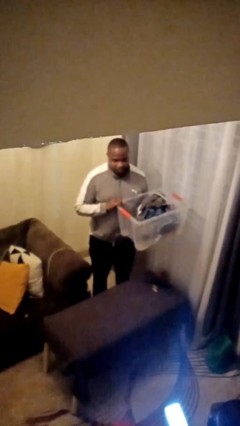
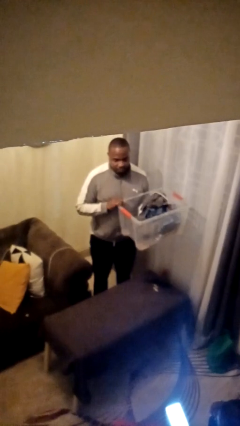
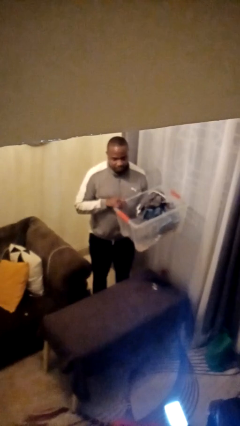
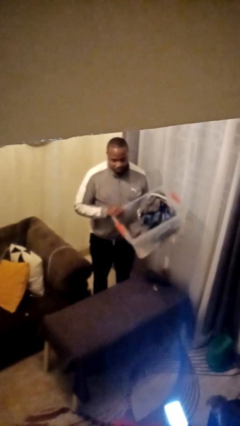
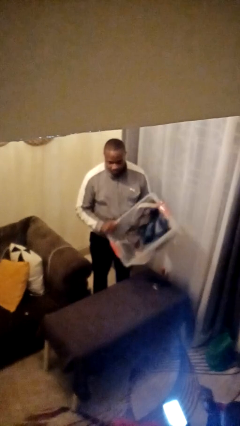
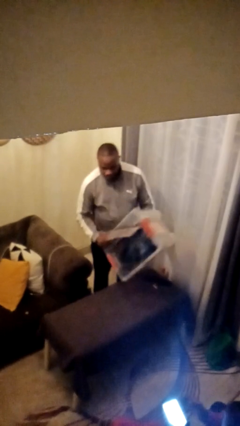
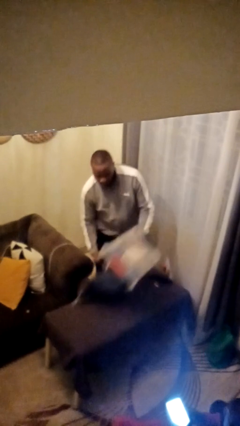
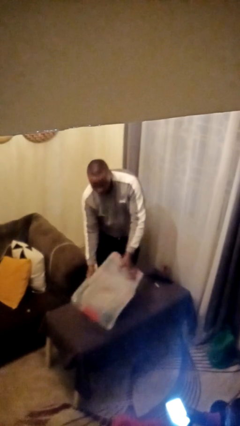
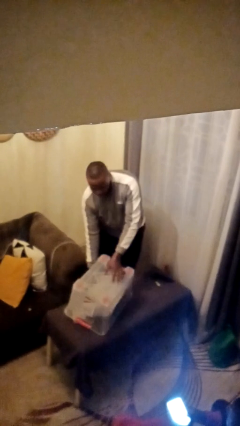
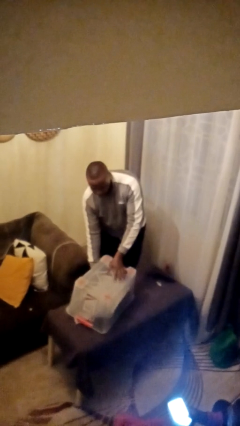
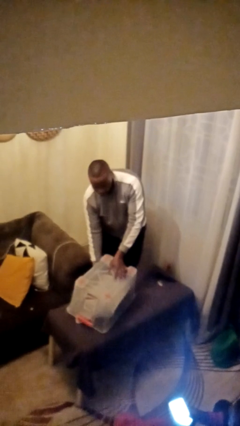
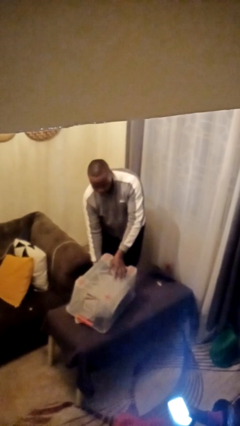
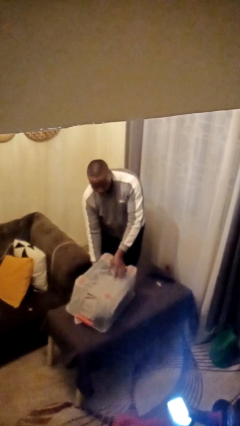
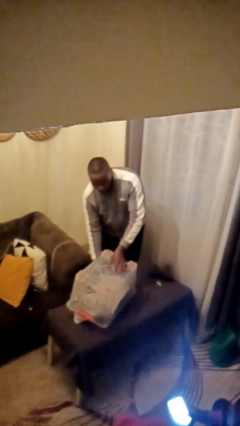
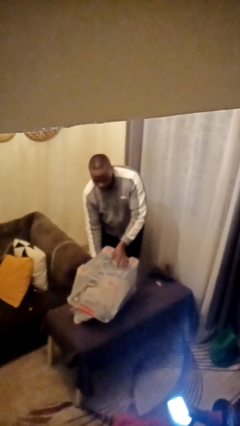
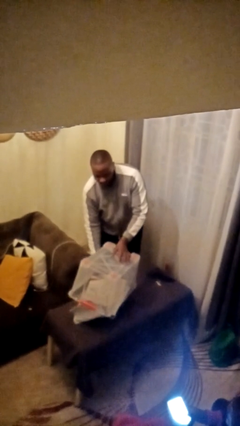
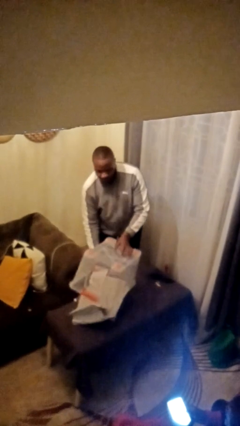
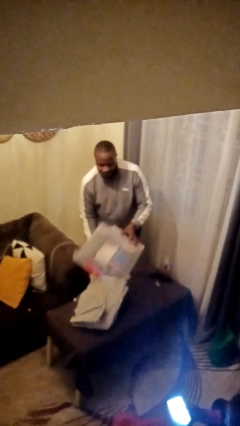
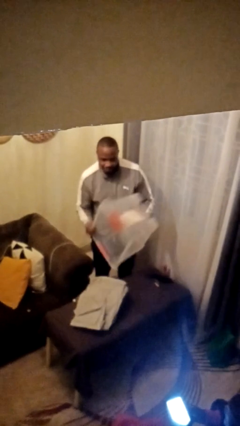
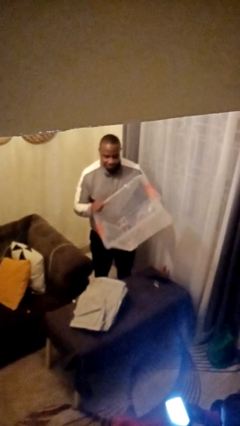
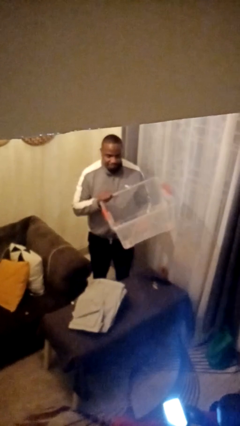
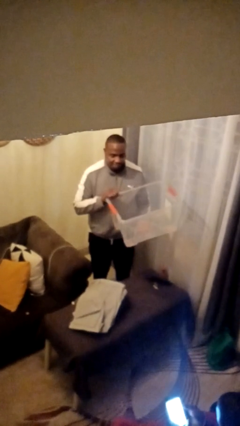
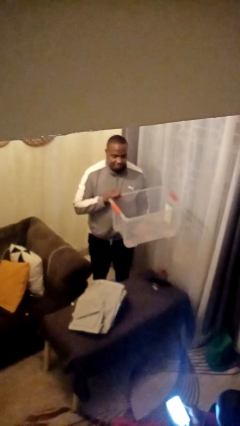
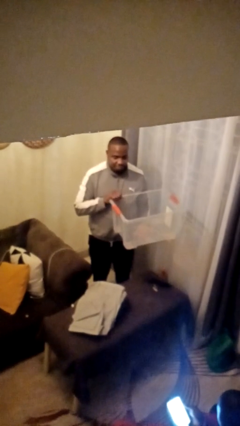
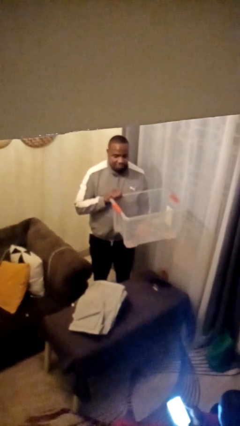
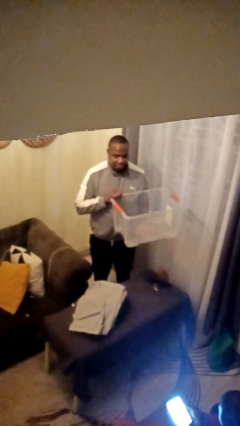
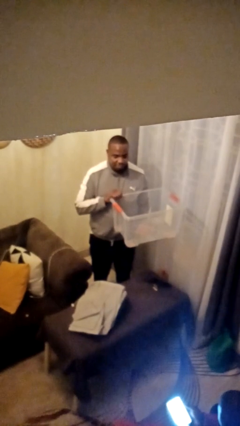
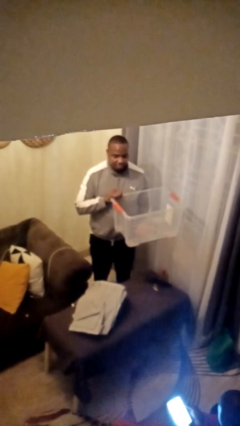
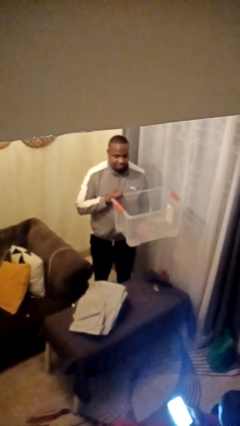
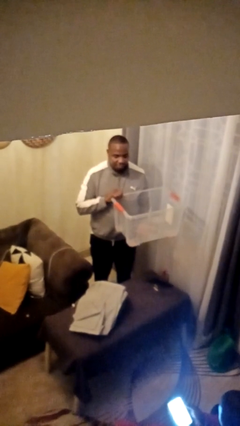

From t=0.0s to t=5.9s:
person unloads box onto table

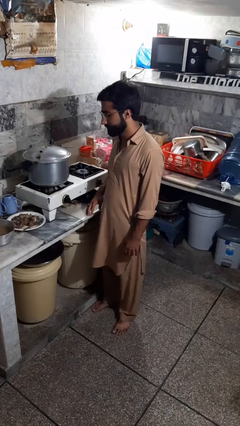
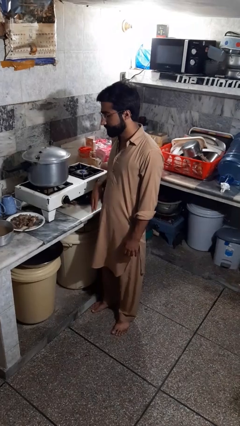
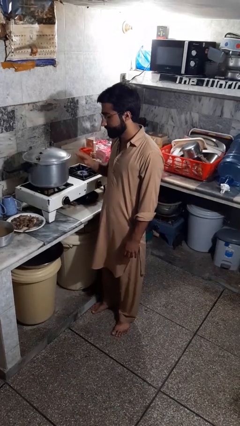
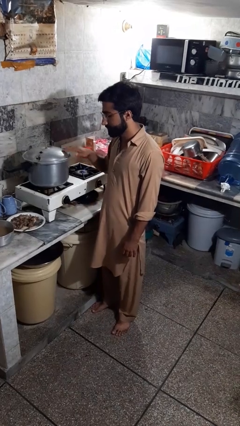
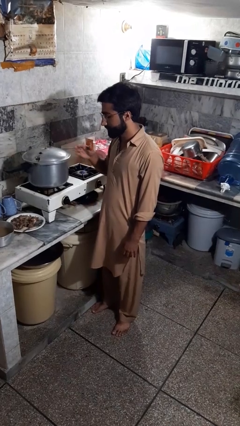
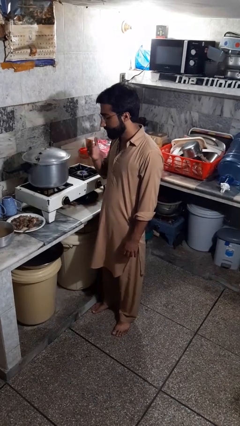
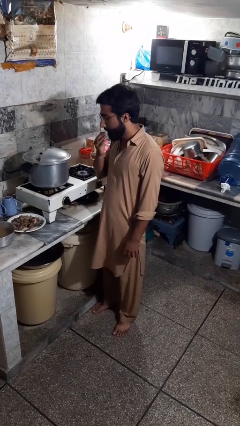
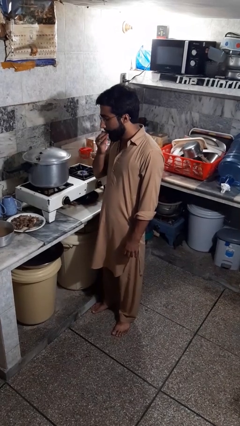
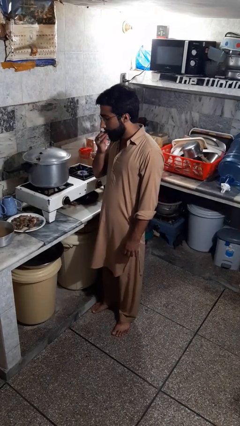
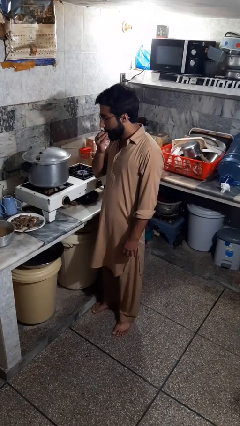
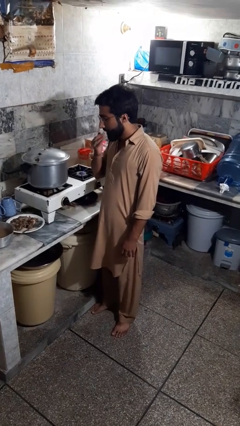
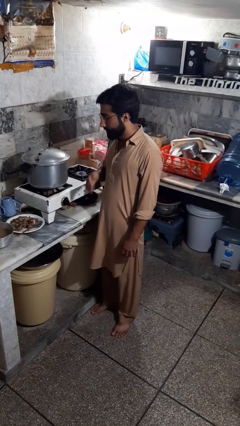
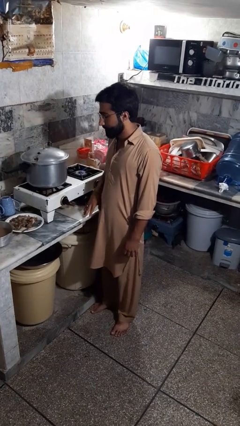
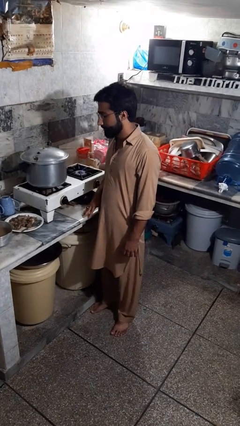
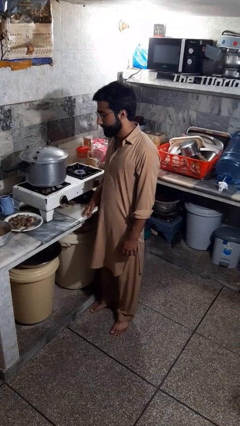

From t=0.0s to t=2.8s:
person burns hand

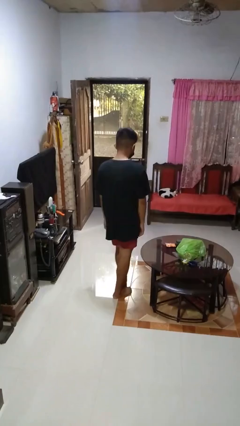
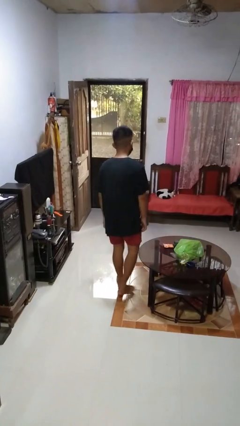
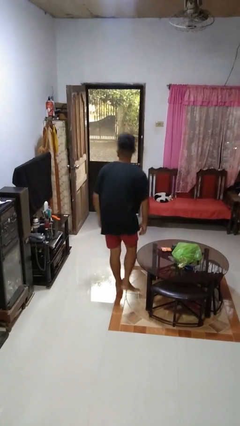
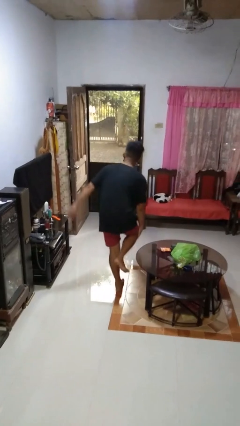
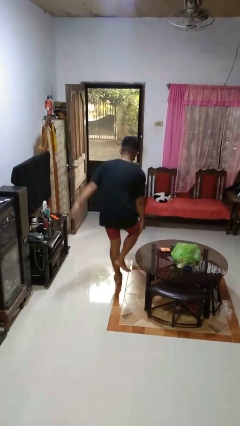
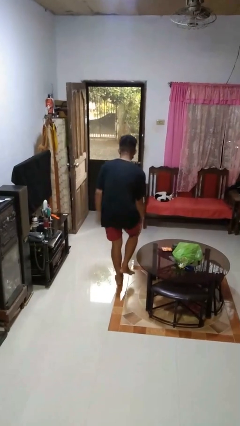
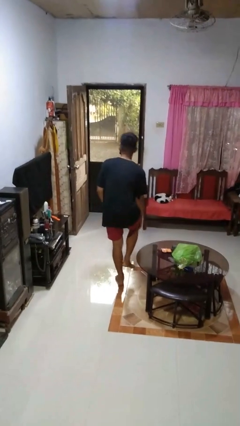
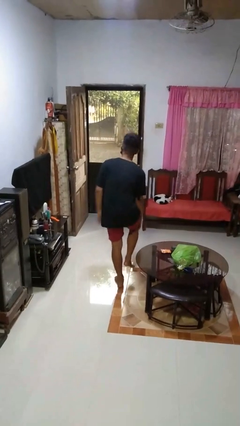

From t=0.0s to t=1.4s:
person bumps into table

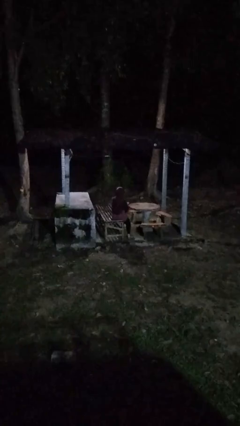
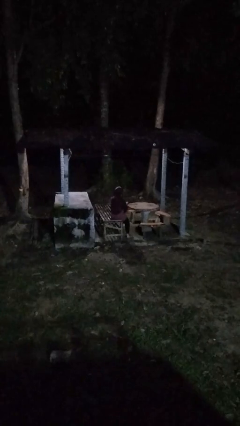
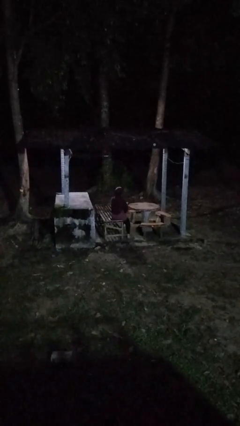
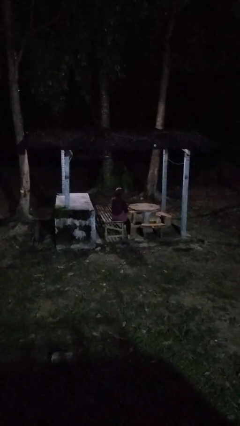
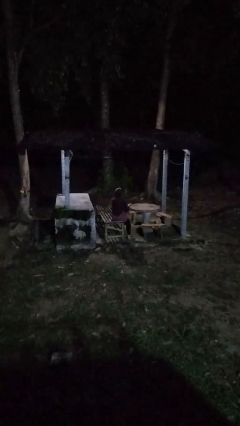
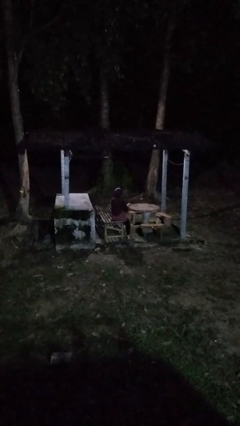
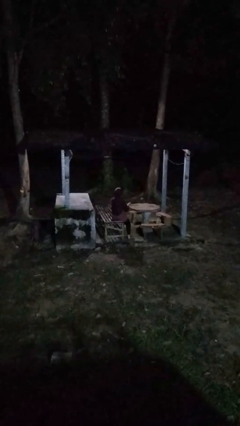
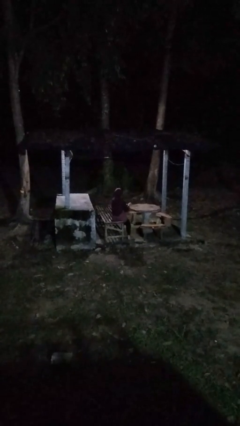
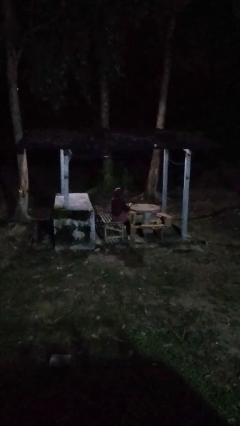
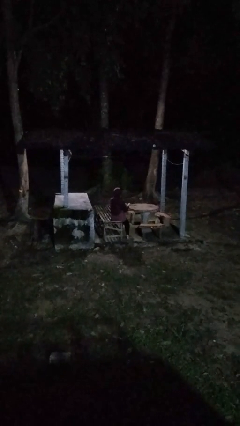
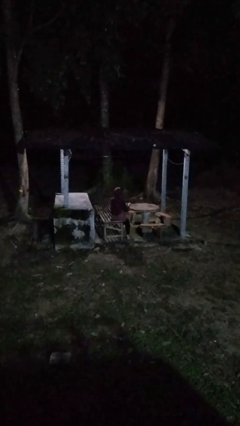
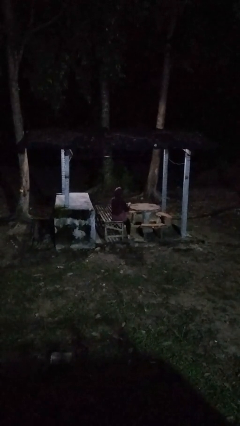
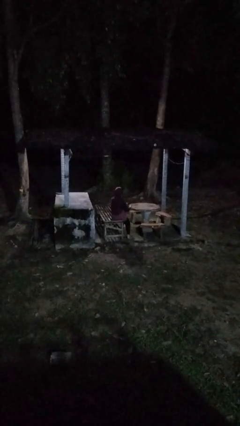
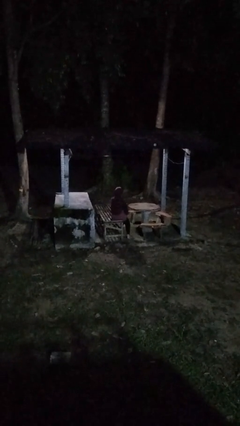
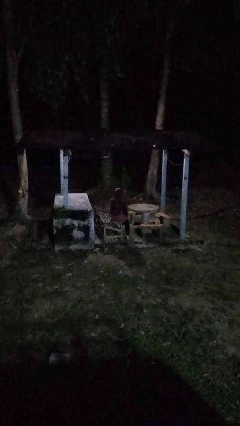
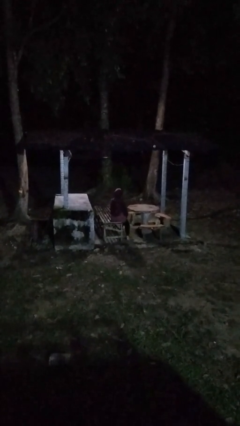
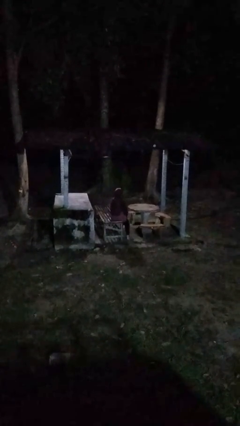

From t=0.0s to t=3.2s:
person paints fingernails

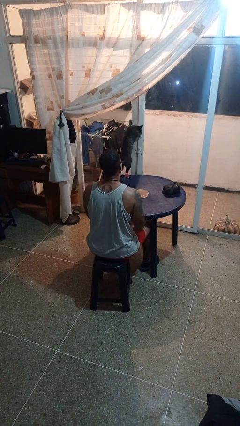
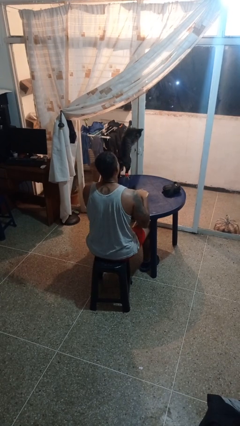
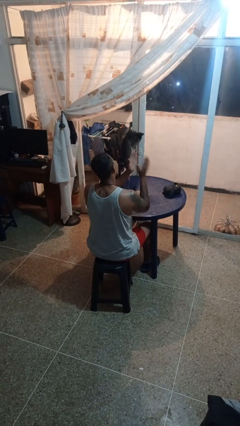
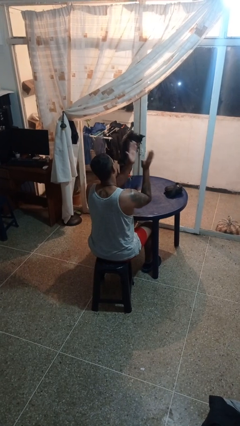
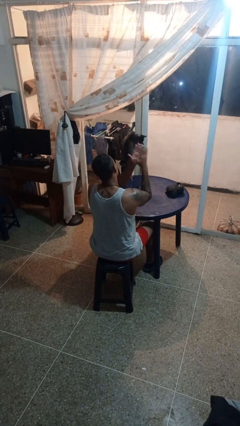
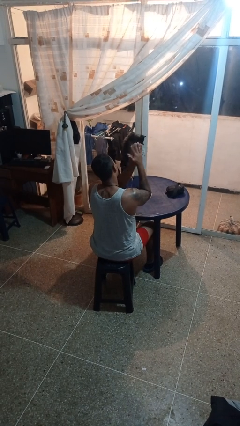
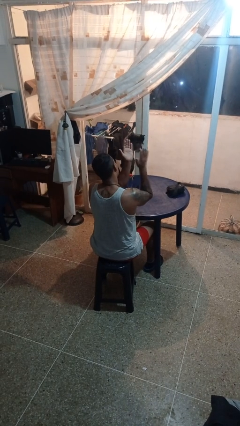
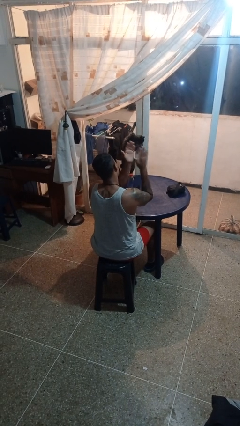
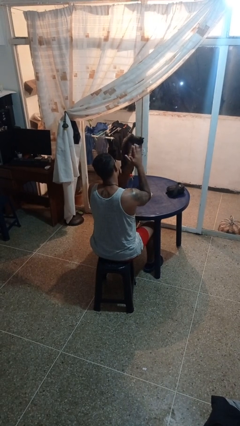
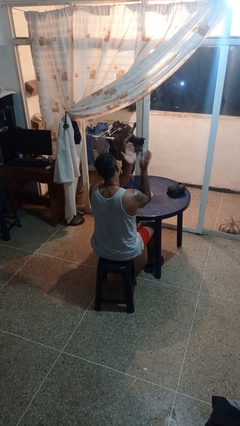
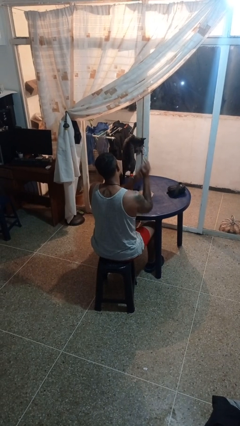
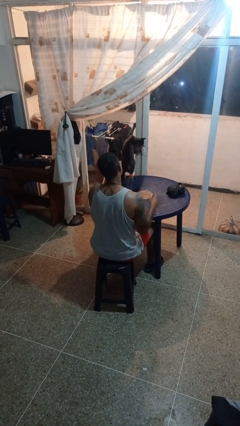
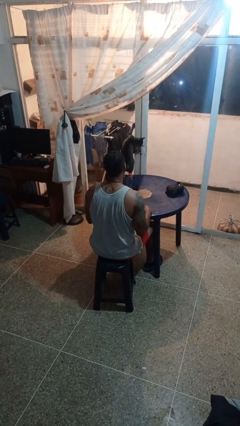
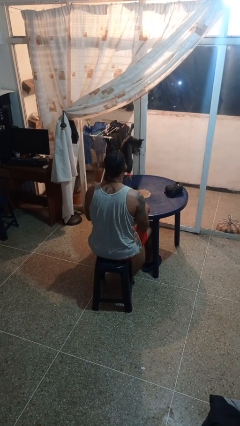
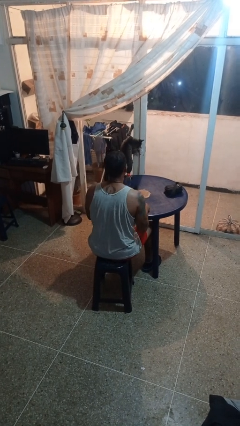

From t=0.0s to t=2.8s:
person claps hands

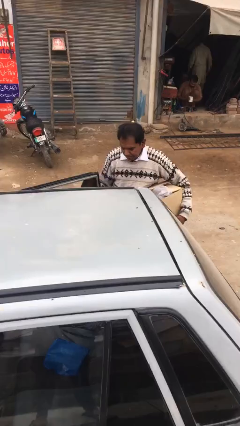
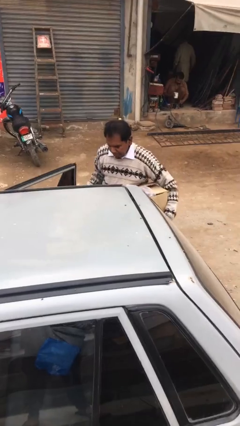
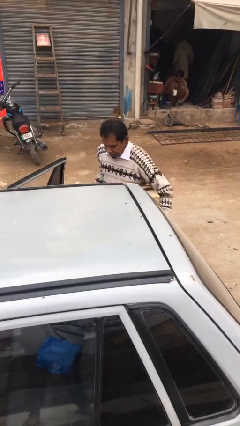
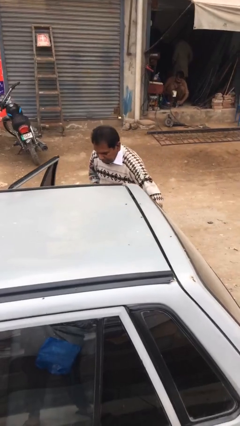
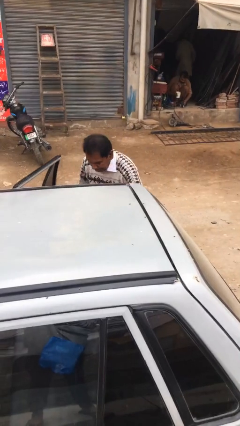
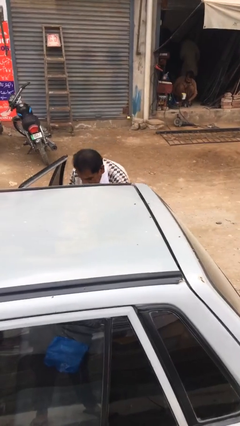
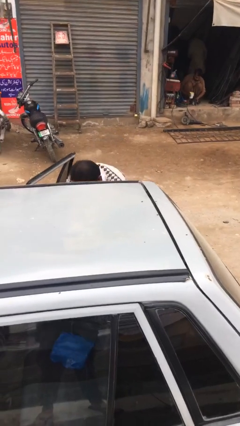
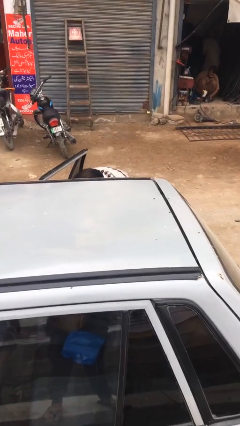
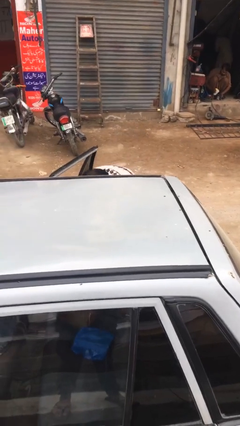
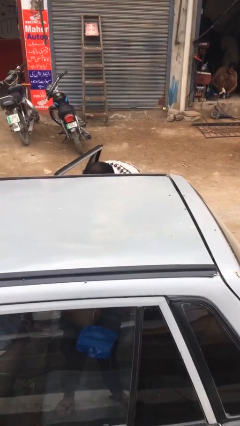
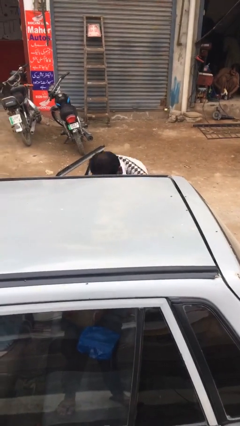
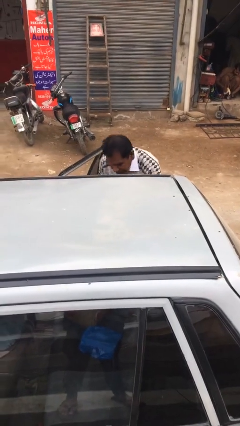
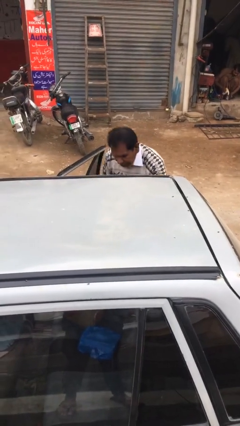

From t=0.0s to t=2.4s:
person loads car
